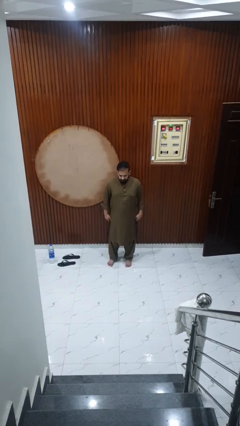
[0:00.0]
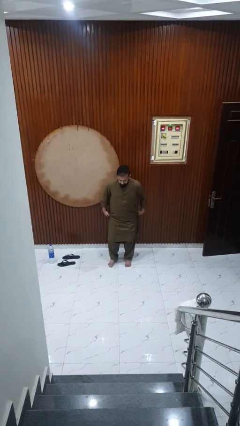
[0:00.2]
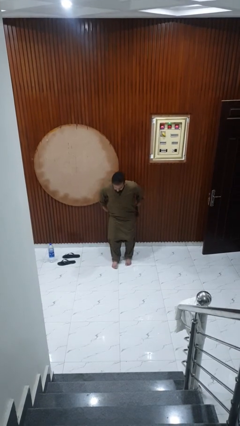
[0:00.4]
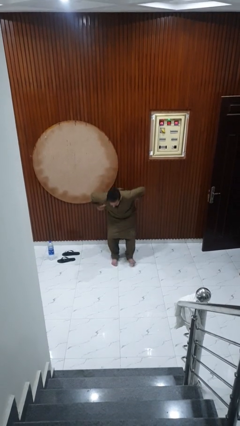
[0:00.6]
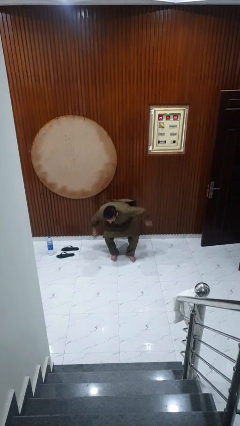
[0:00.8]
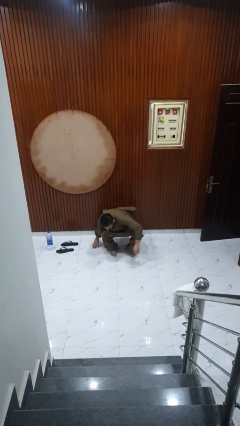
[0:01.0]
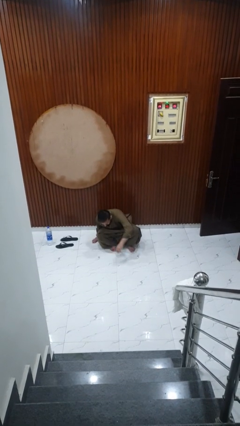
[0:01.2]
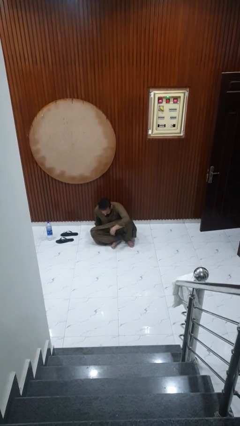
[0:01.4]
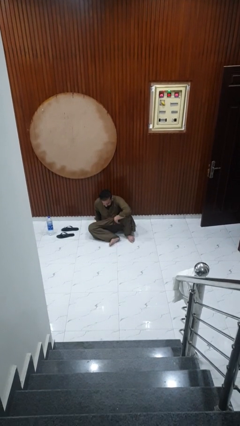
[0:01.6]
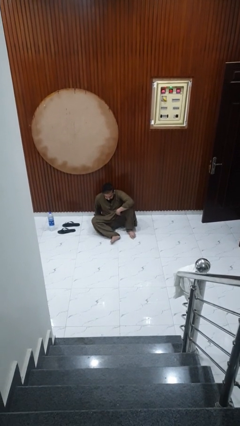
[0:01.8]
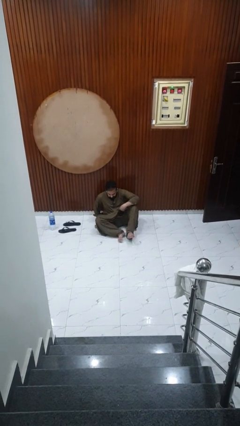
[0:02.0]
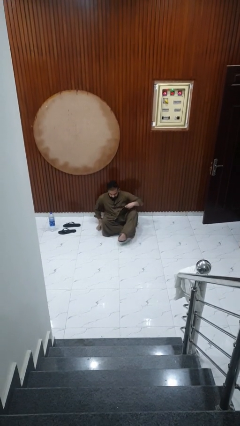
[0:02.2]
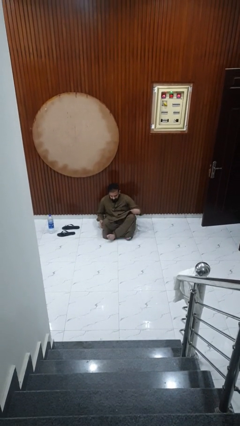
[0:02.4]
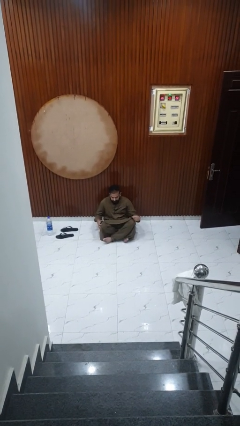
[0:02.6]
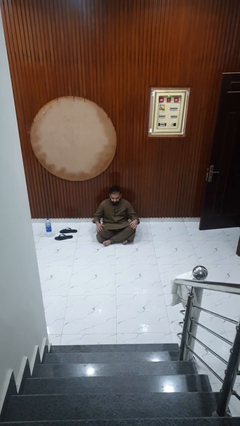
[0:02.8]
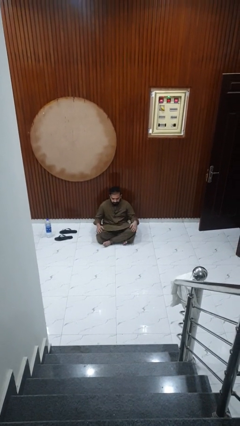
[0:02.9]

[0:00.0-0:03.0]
person sits crisscross

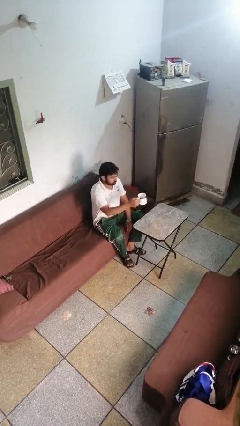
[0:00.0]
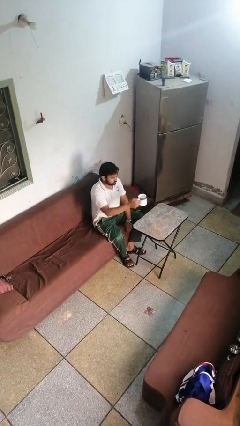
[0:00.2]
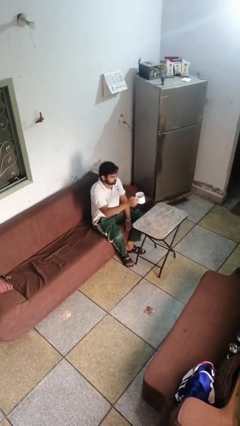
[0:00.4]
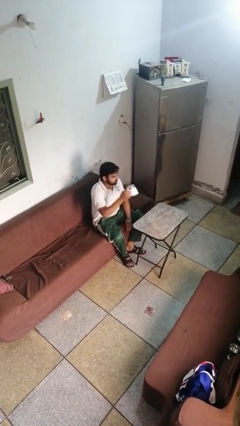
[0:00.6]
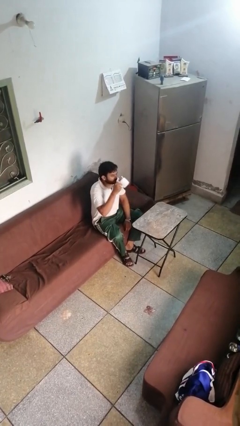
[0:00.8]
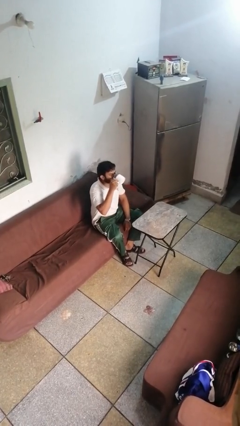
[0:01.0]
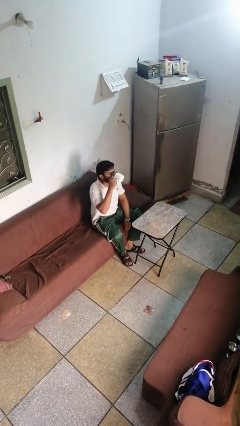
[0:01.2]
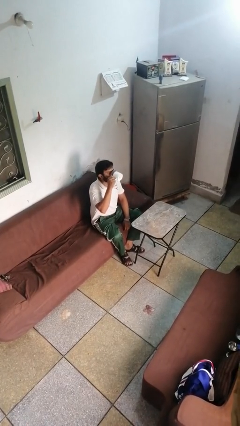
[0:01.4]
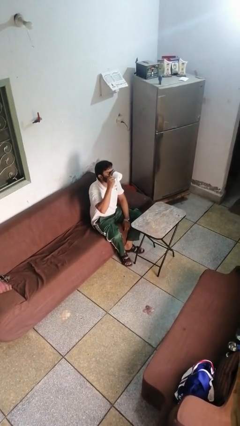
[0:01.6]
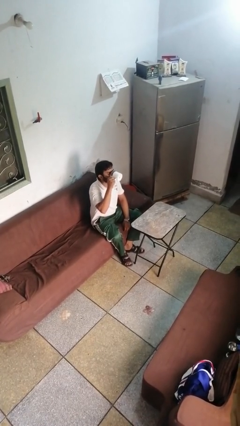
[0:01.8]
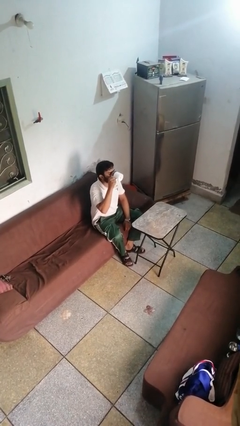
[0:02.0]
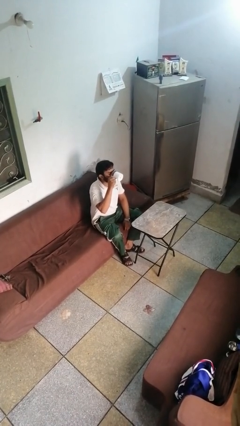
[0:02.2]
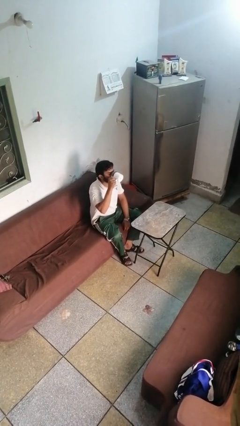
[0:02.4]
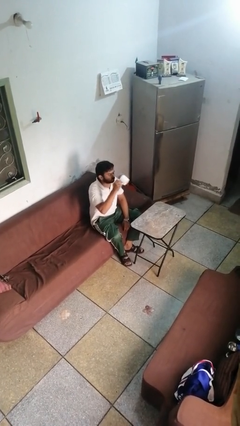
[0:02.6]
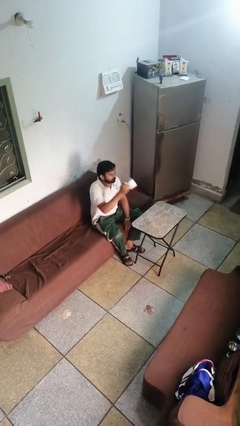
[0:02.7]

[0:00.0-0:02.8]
person drinks from mug

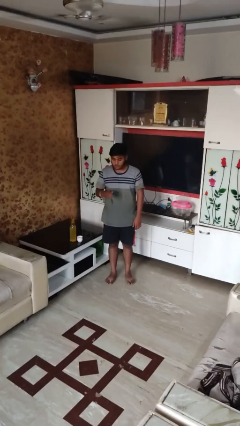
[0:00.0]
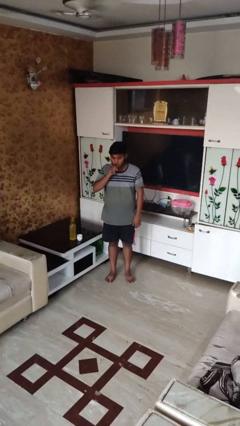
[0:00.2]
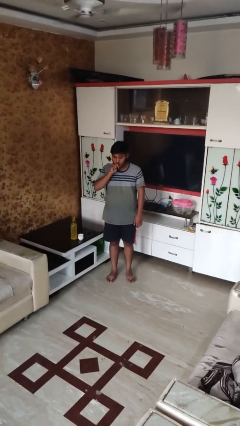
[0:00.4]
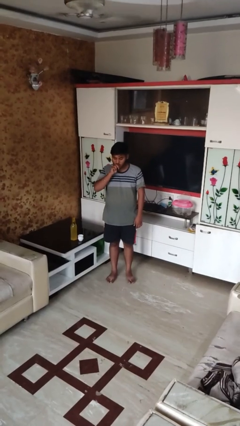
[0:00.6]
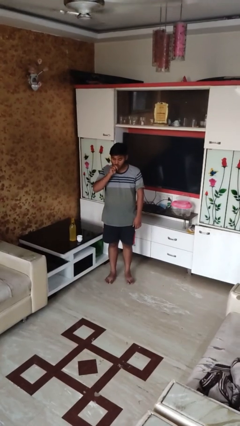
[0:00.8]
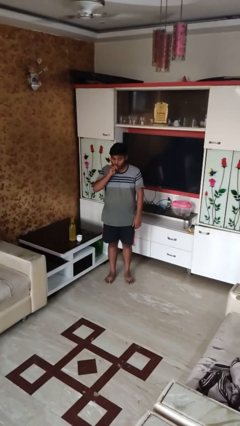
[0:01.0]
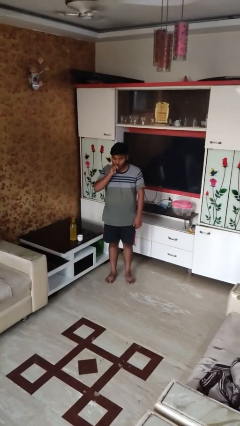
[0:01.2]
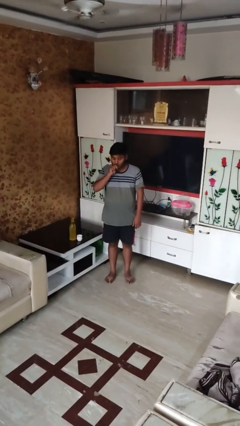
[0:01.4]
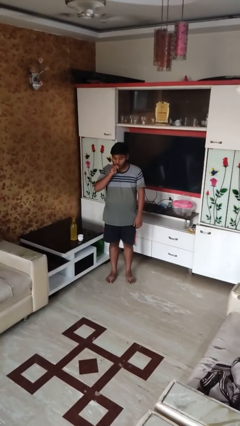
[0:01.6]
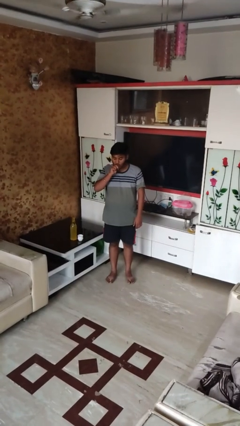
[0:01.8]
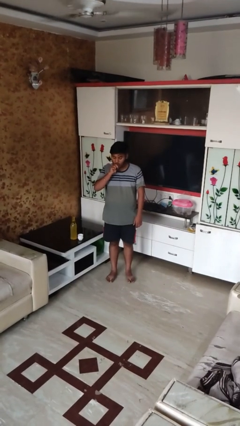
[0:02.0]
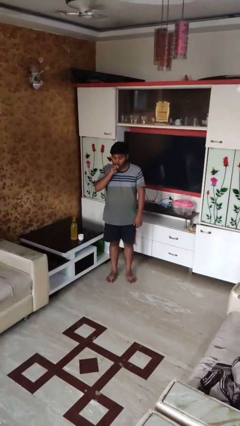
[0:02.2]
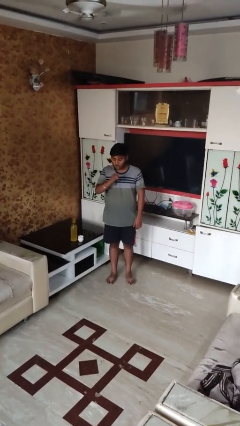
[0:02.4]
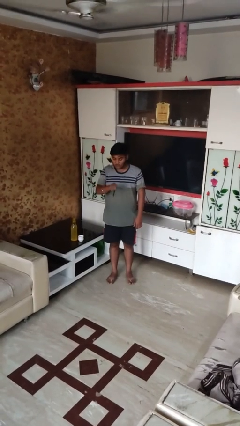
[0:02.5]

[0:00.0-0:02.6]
person vapes

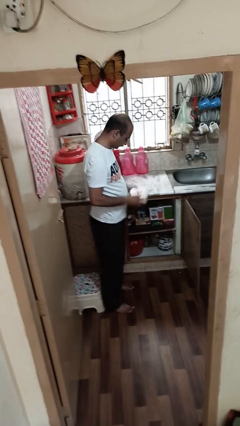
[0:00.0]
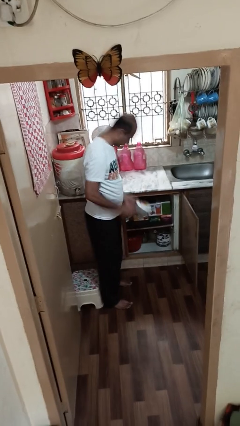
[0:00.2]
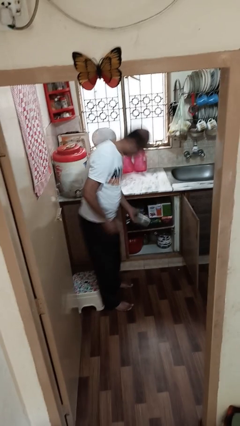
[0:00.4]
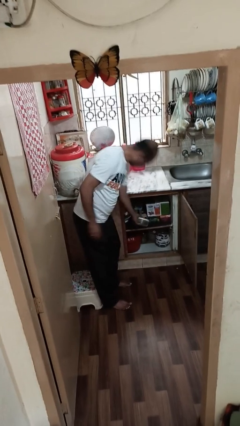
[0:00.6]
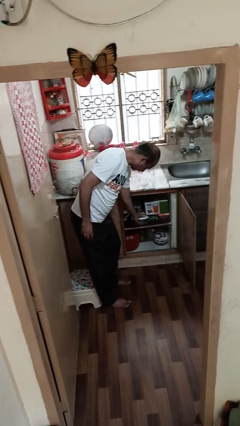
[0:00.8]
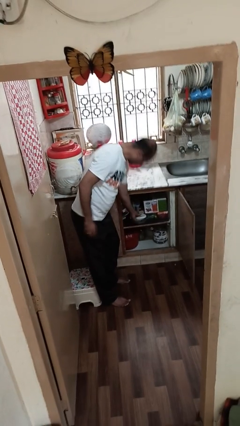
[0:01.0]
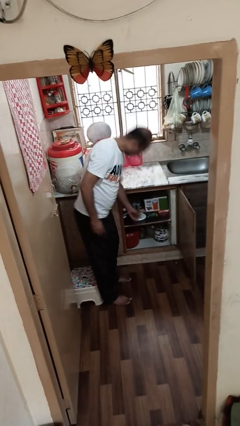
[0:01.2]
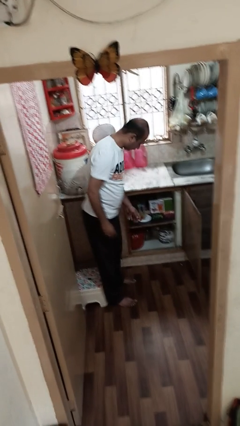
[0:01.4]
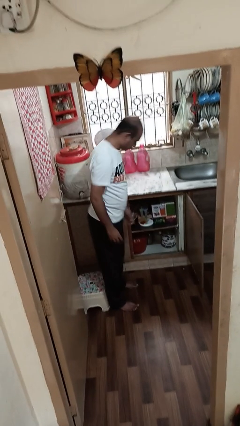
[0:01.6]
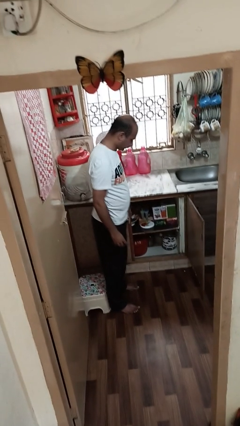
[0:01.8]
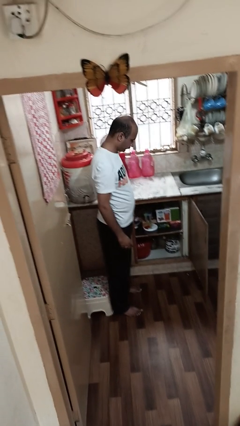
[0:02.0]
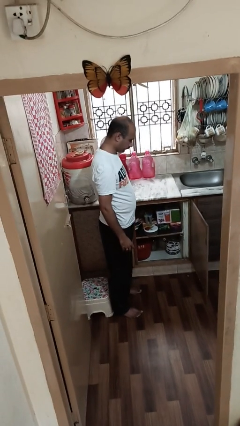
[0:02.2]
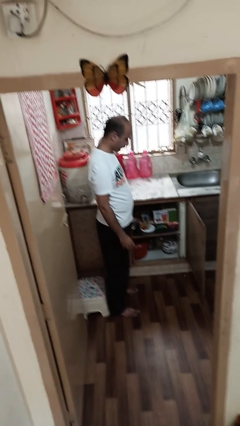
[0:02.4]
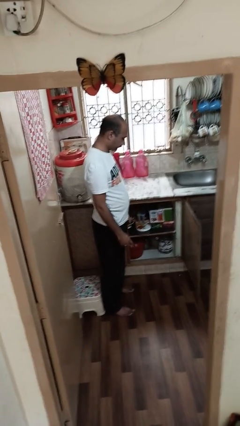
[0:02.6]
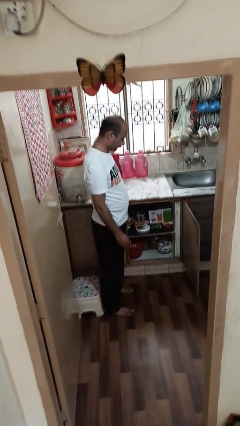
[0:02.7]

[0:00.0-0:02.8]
person puts down object into cabinet

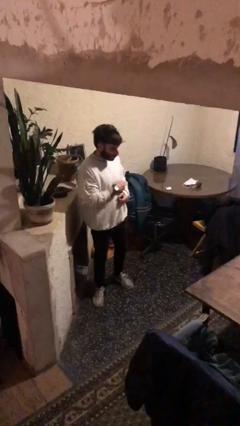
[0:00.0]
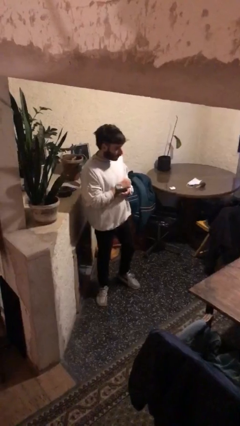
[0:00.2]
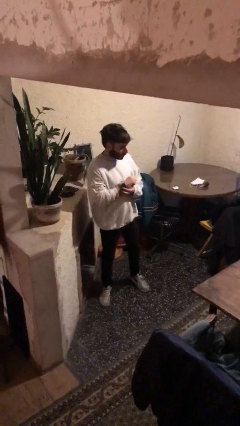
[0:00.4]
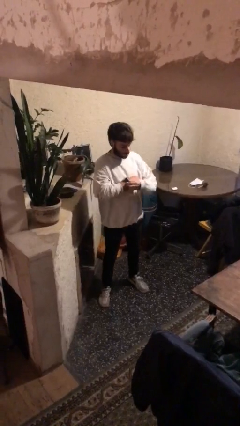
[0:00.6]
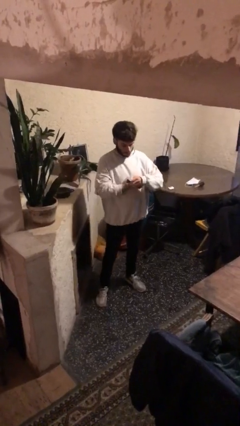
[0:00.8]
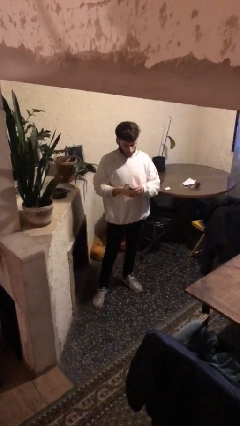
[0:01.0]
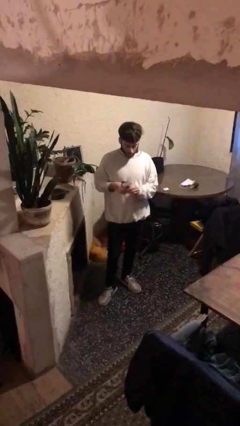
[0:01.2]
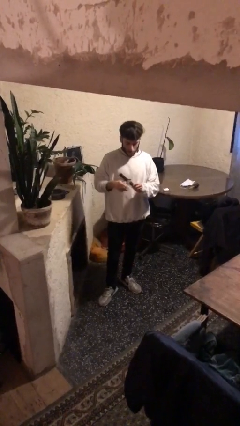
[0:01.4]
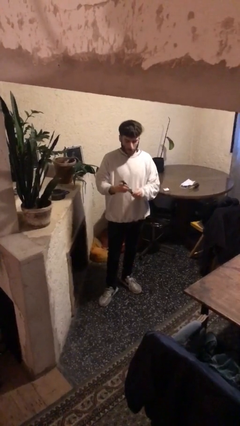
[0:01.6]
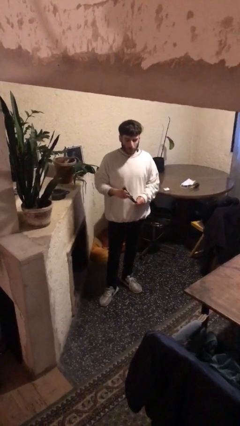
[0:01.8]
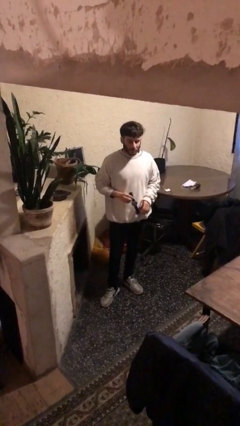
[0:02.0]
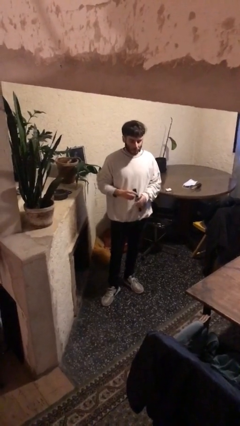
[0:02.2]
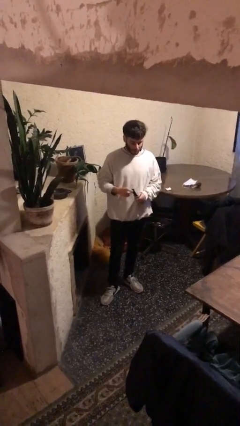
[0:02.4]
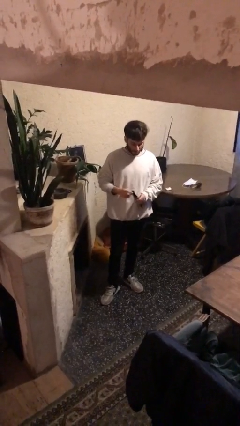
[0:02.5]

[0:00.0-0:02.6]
person takes off wristwatch

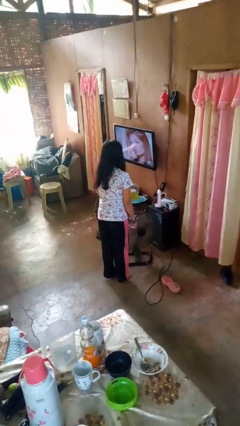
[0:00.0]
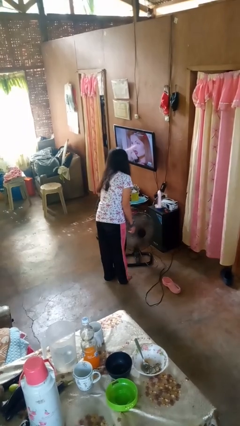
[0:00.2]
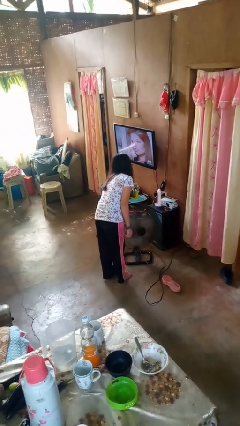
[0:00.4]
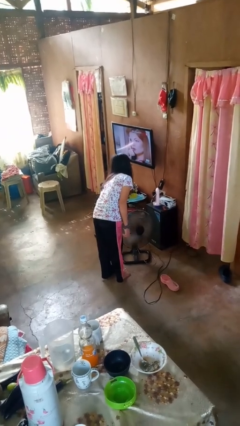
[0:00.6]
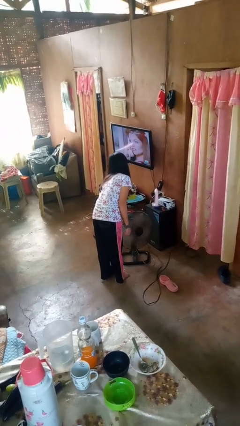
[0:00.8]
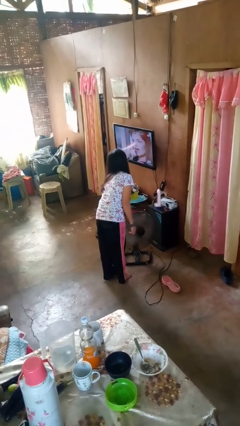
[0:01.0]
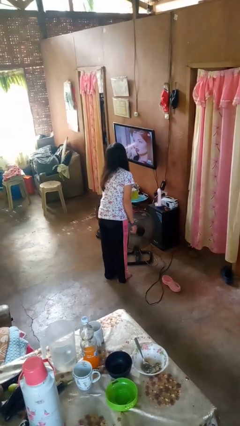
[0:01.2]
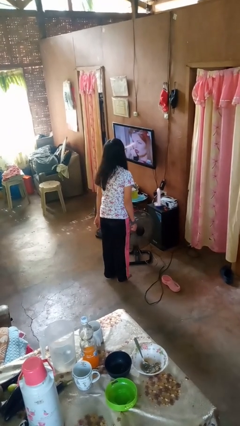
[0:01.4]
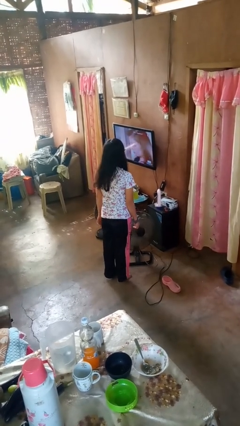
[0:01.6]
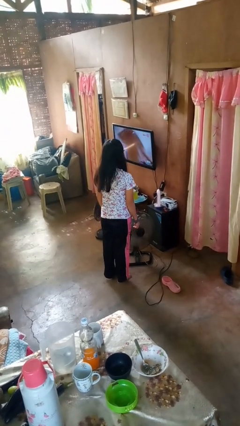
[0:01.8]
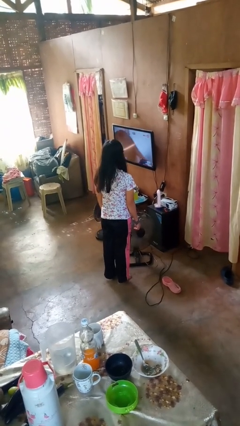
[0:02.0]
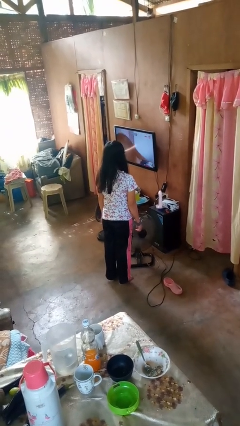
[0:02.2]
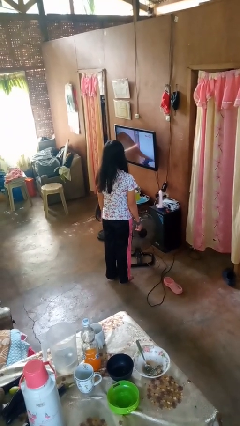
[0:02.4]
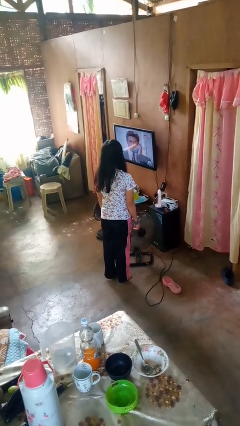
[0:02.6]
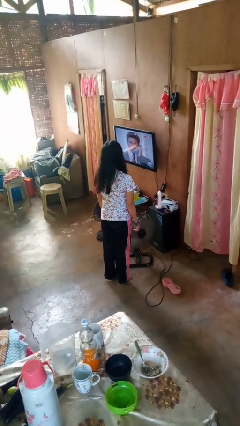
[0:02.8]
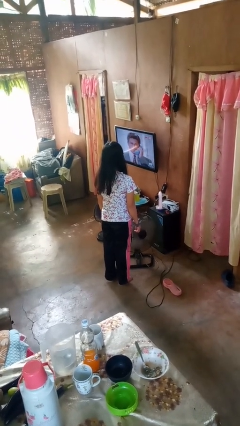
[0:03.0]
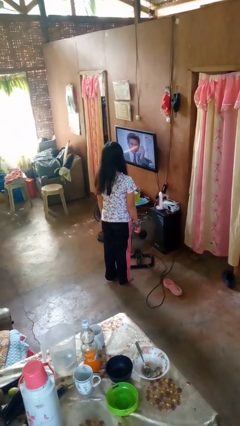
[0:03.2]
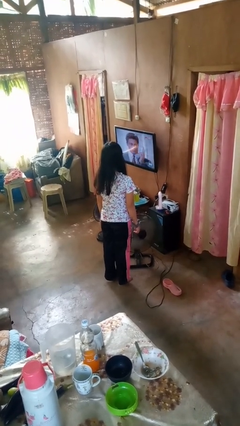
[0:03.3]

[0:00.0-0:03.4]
person turns on fan

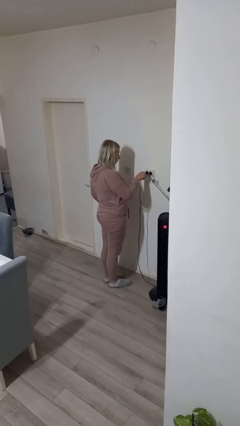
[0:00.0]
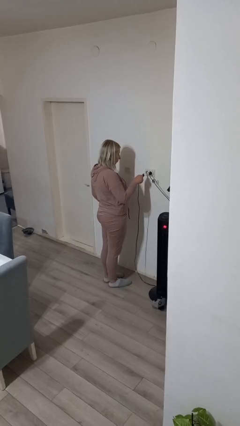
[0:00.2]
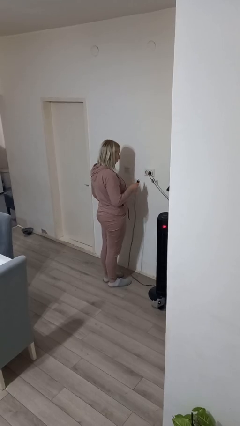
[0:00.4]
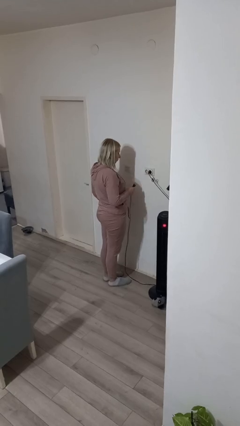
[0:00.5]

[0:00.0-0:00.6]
person unplugs from electrical socket
